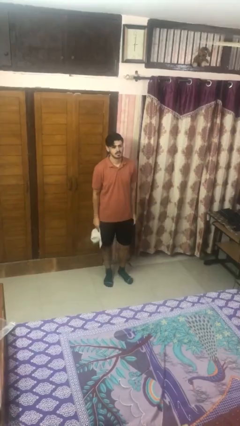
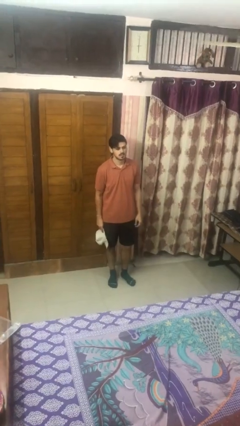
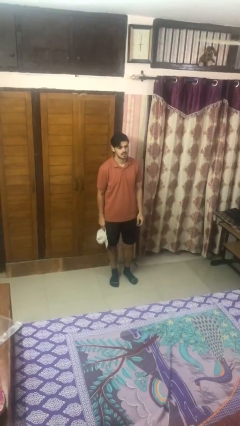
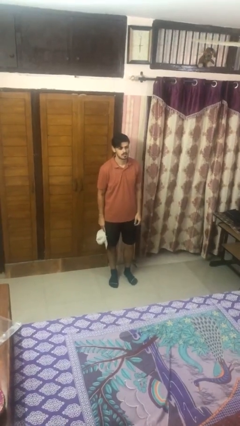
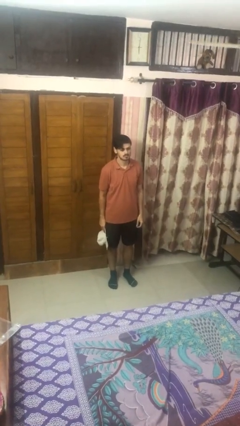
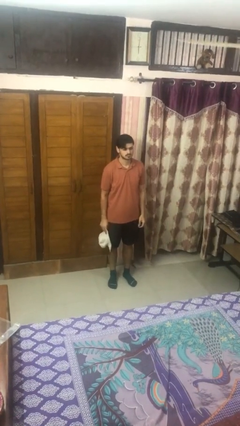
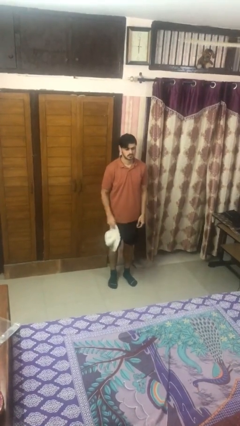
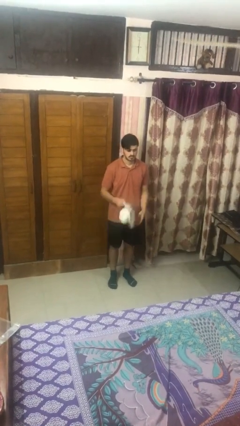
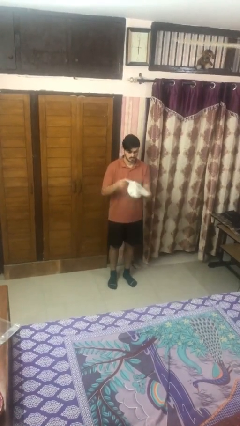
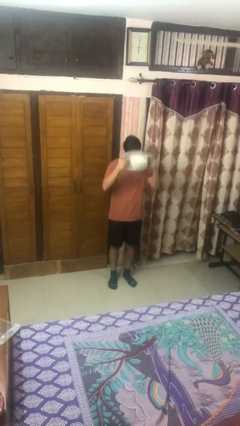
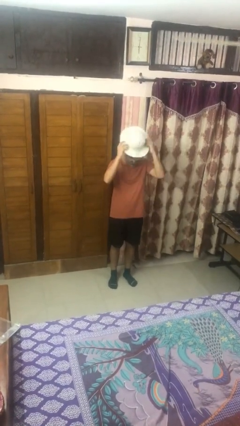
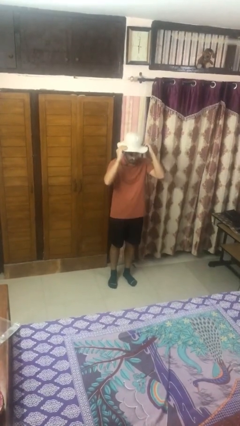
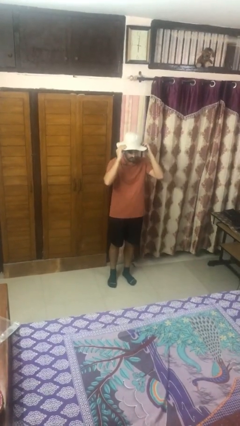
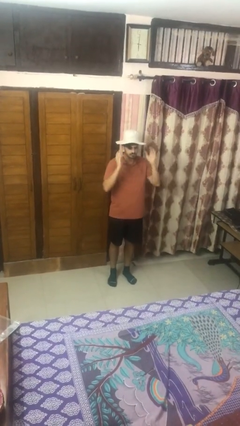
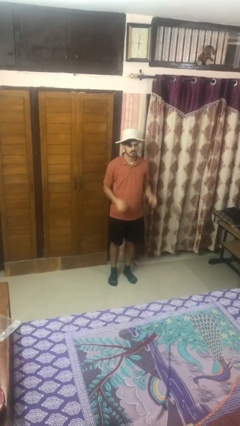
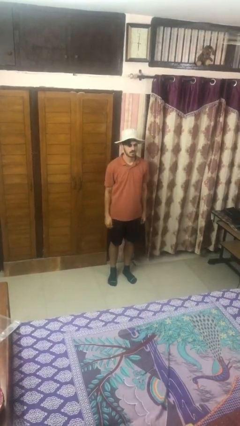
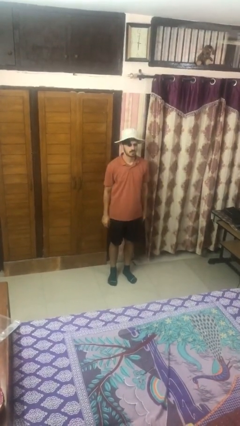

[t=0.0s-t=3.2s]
person puts on hat

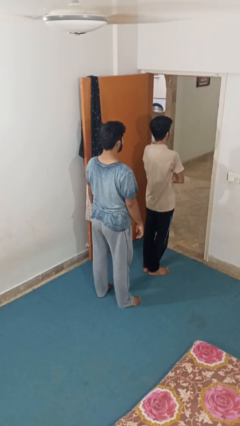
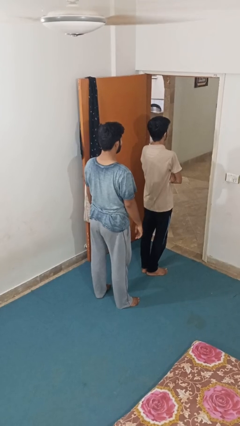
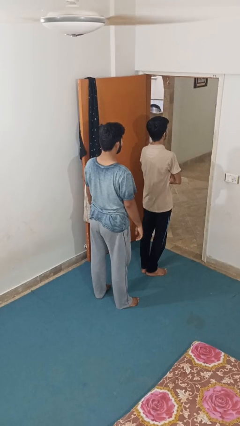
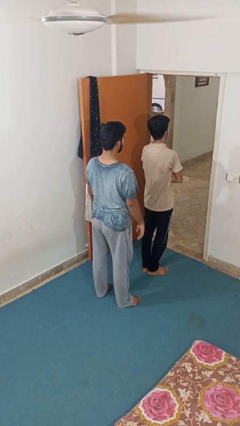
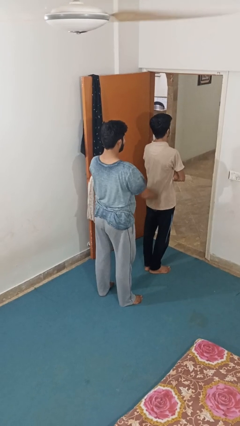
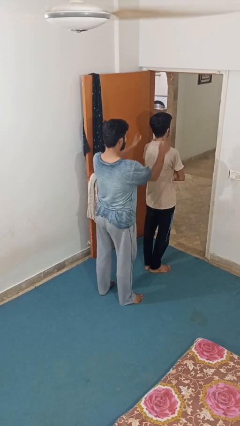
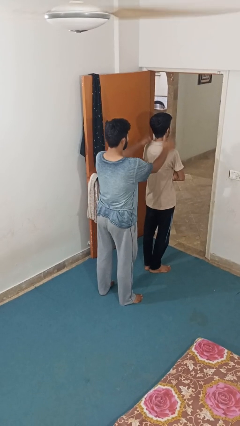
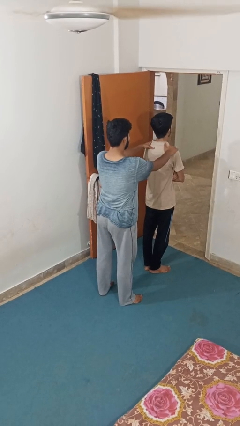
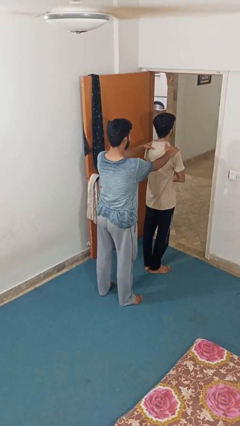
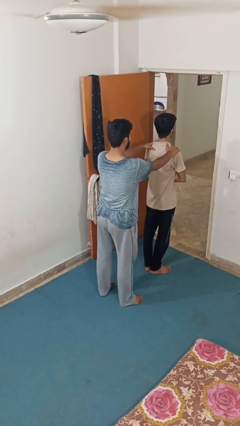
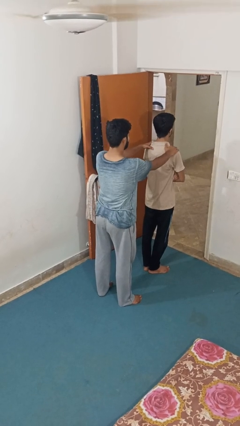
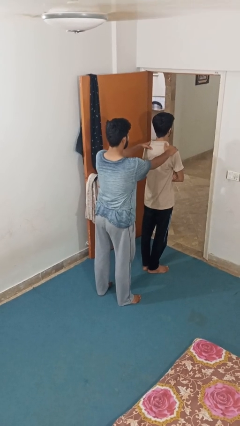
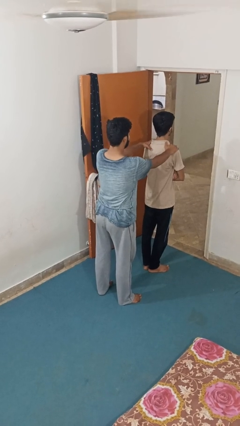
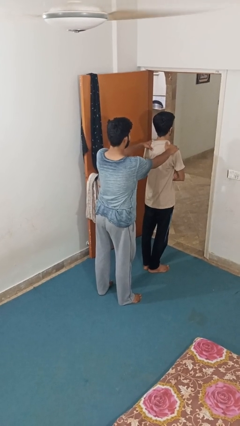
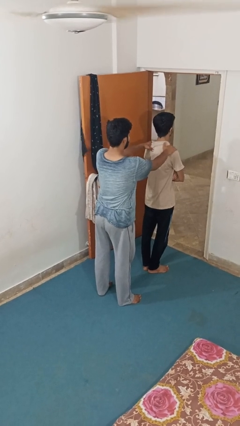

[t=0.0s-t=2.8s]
person grabs person by shoulder

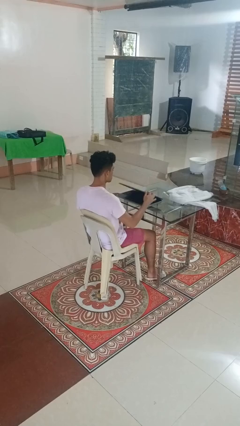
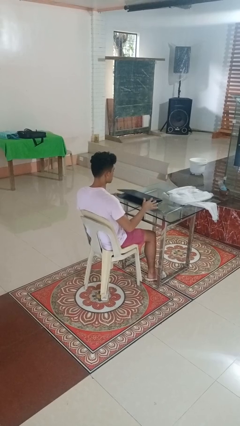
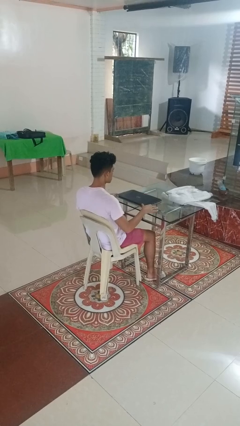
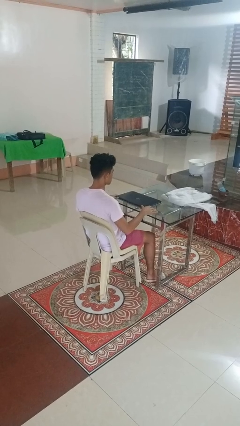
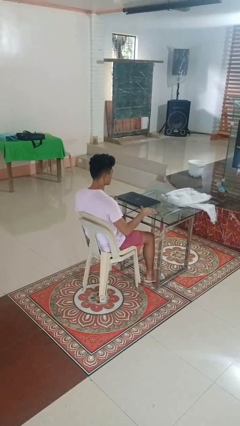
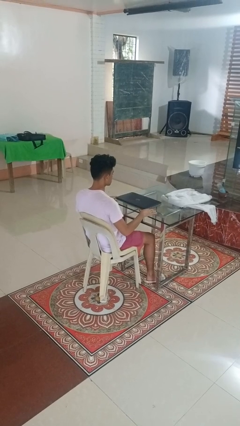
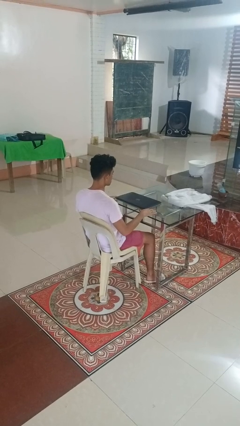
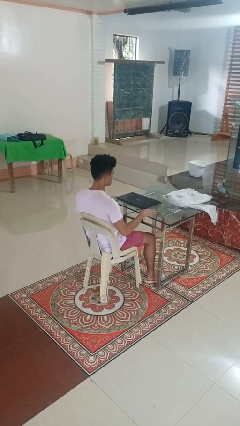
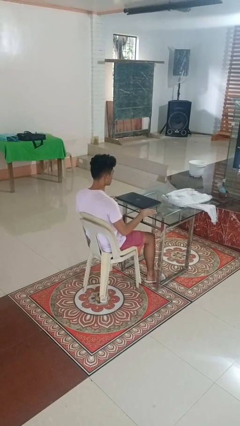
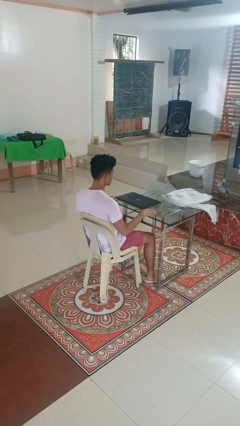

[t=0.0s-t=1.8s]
person closes laptop

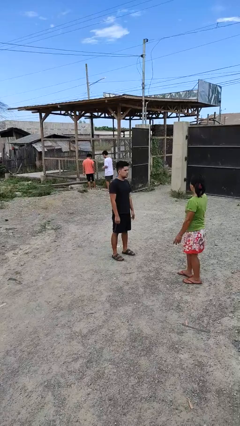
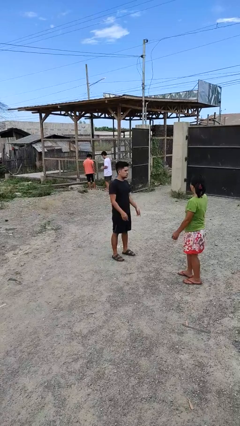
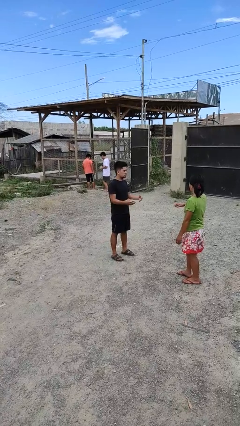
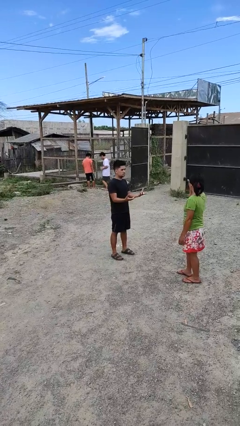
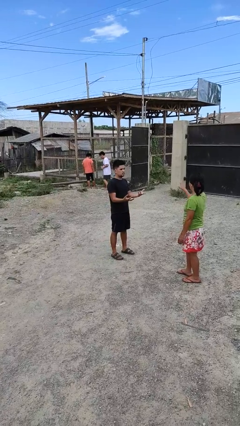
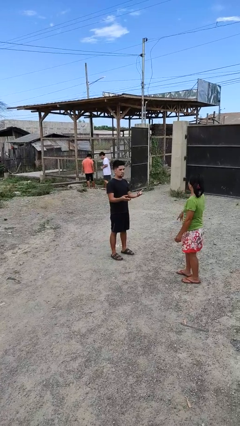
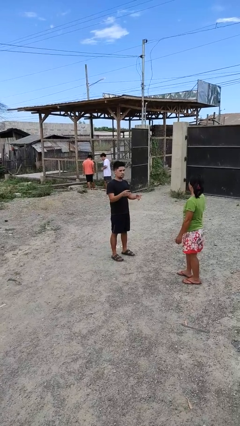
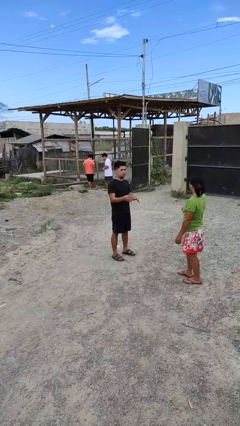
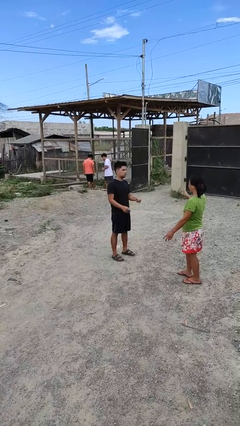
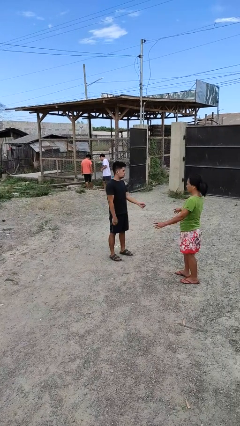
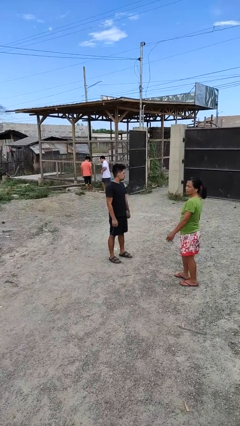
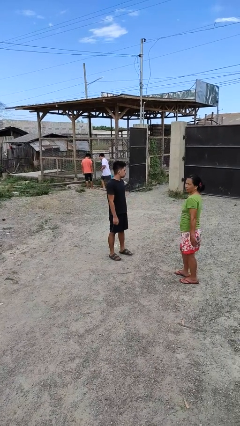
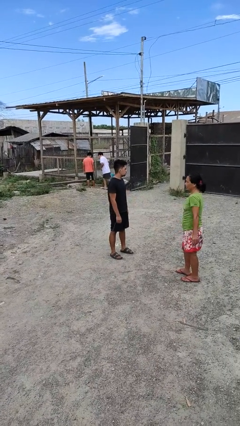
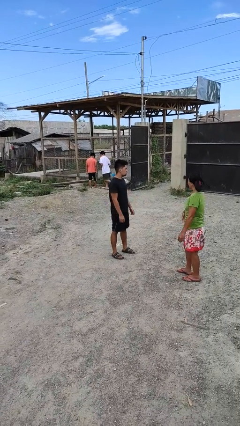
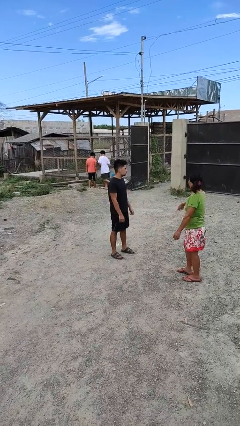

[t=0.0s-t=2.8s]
person talks to person

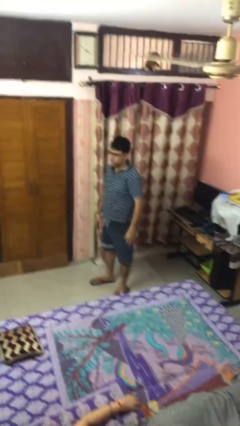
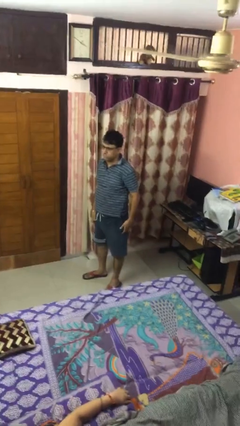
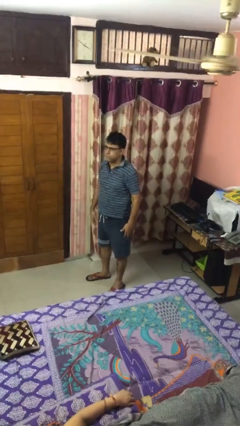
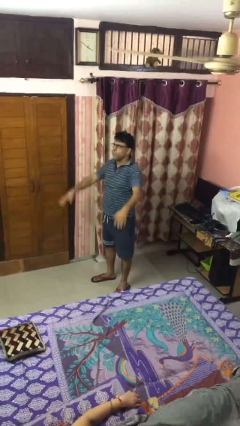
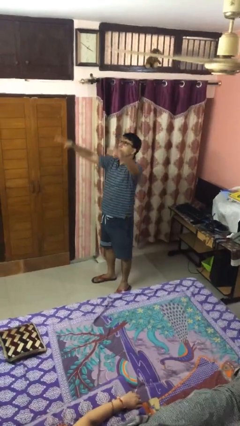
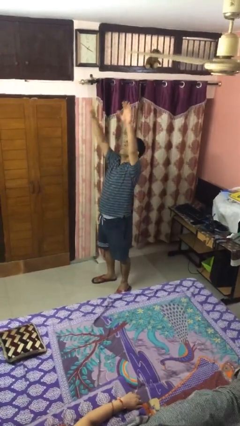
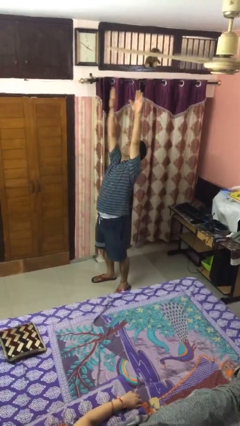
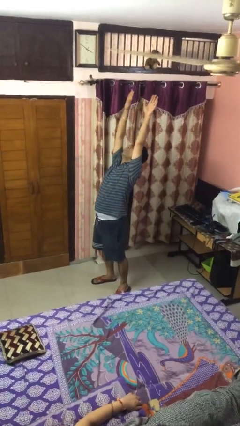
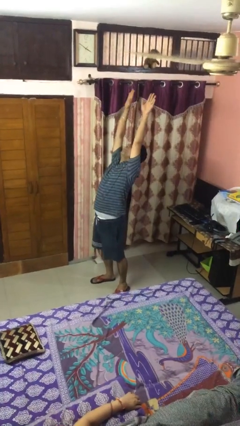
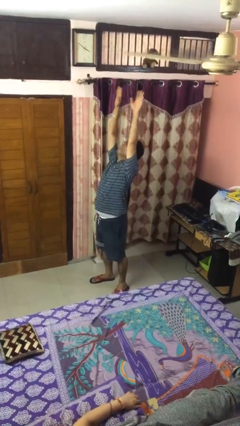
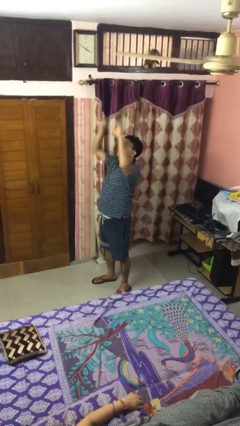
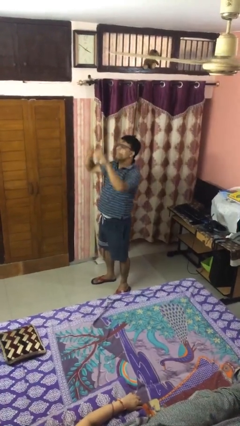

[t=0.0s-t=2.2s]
person stretches arms over head

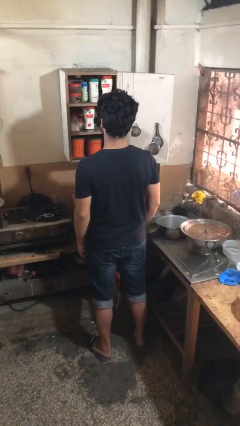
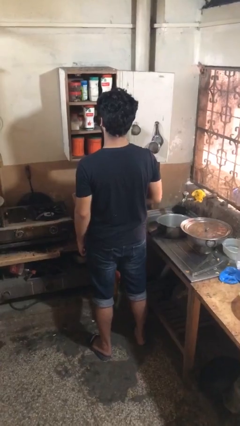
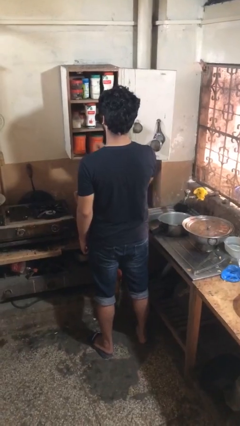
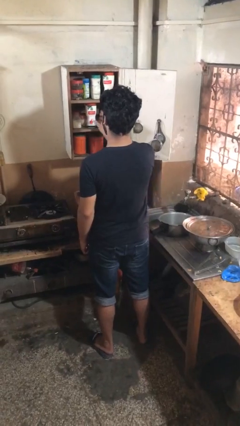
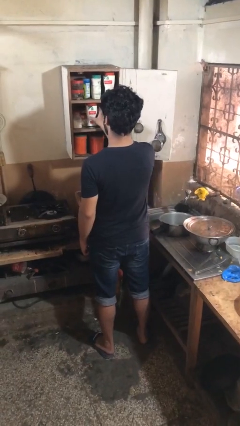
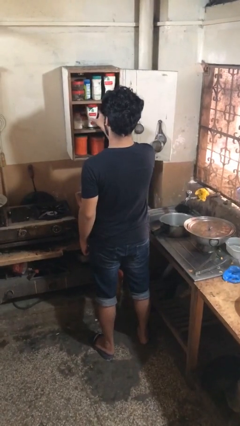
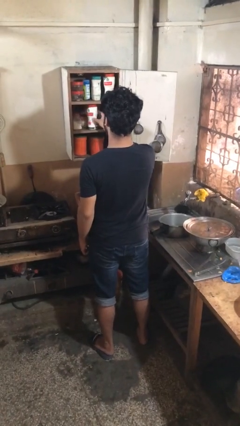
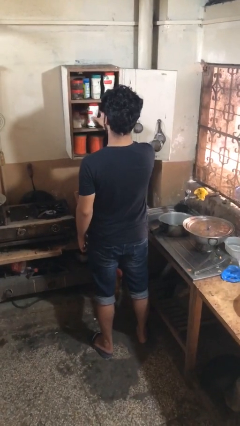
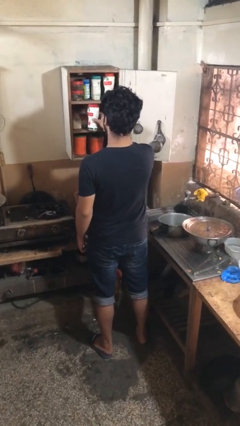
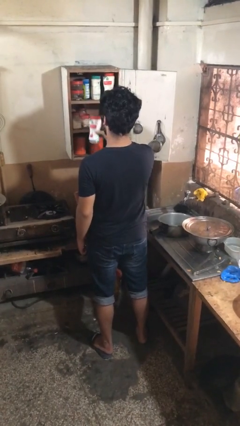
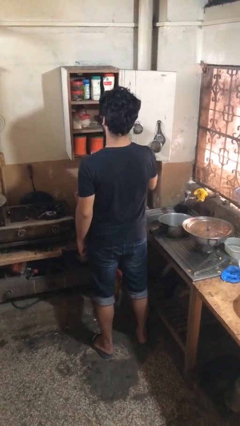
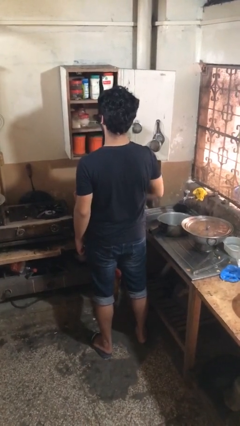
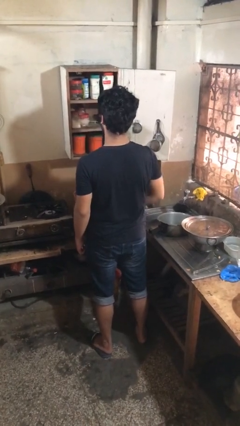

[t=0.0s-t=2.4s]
person picks up object from cabinet

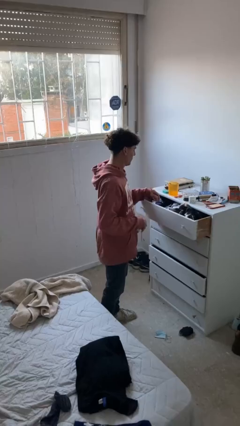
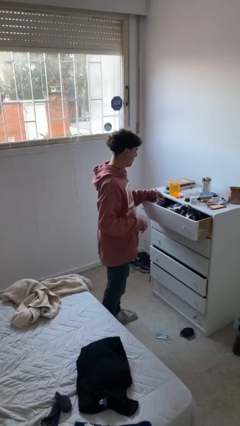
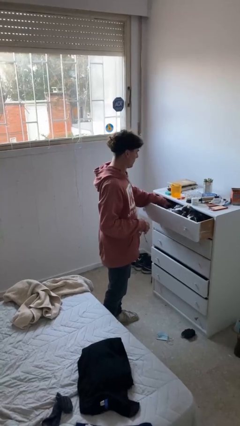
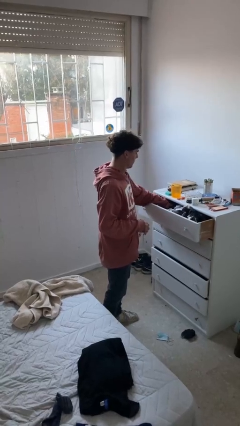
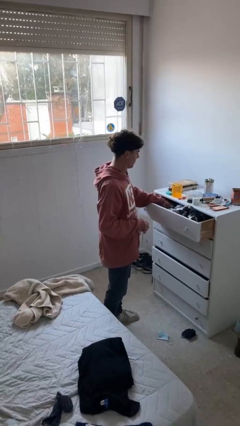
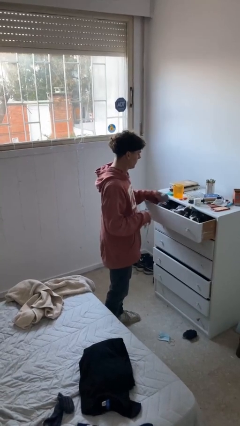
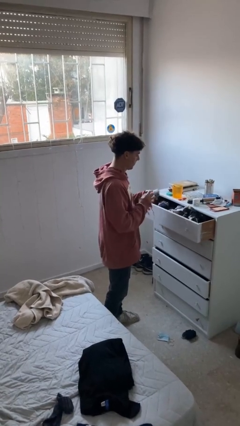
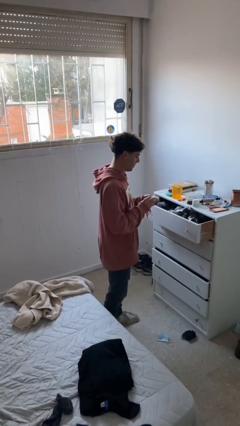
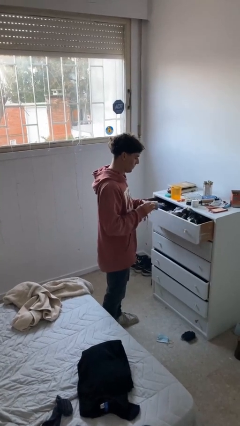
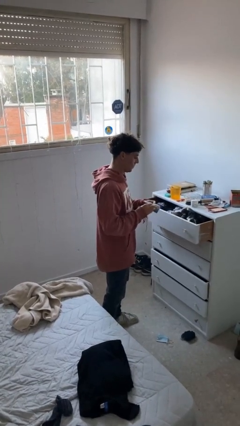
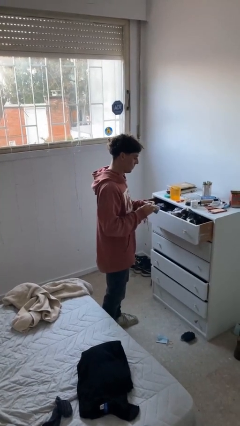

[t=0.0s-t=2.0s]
person takes clothes from dresser
